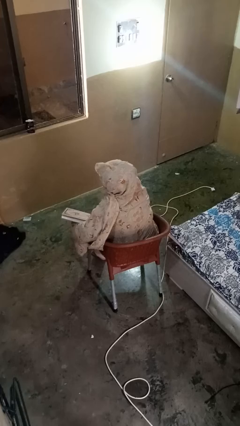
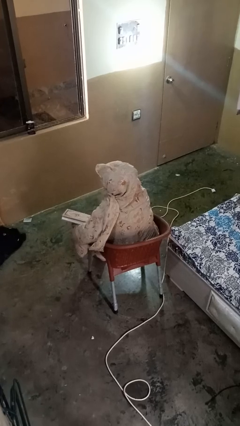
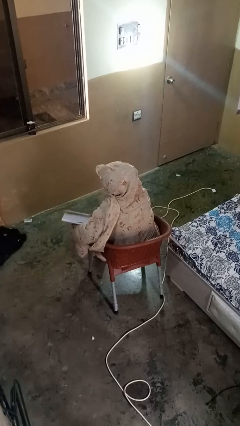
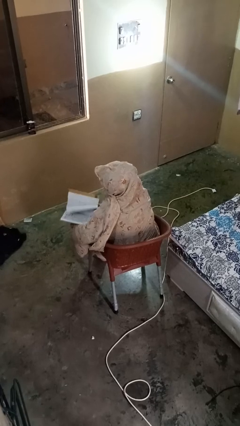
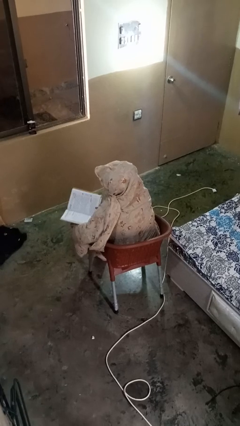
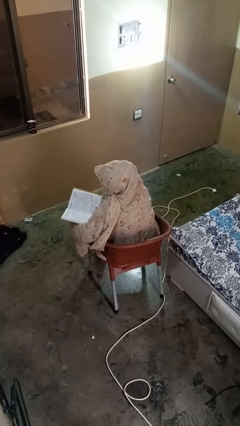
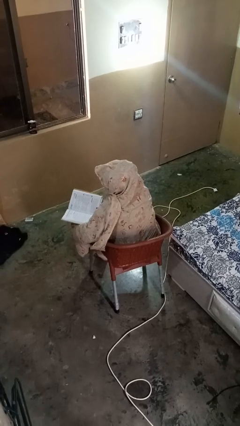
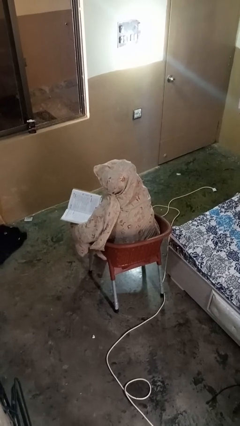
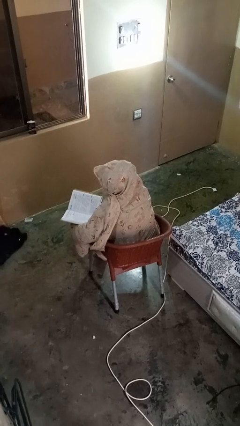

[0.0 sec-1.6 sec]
person reads book

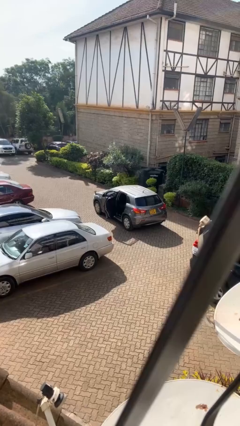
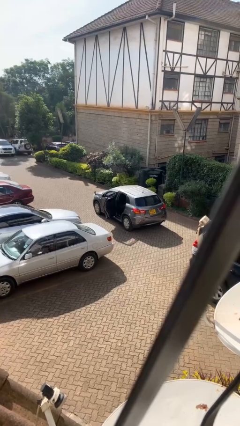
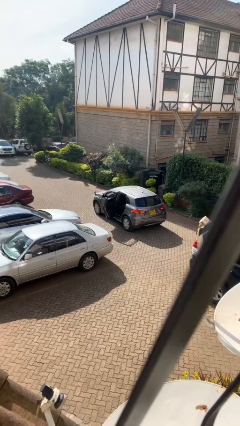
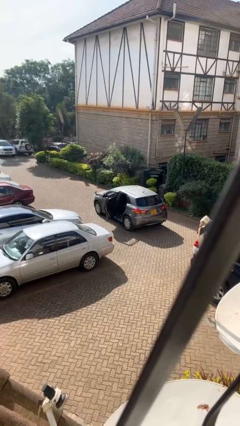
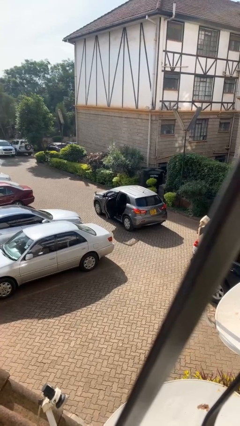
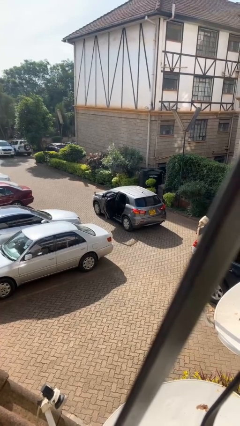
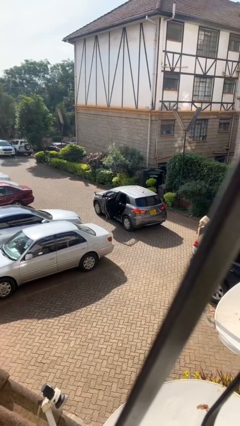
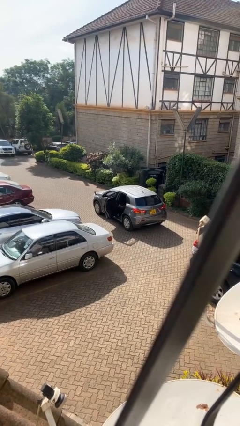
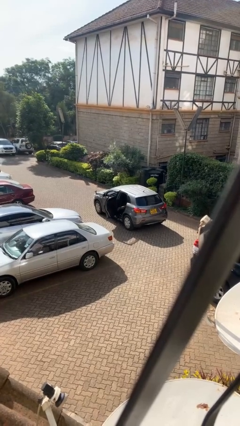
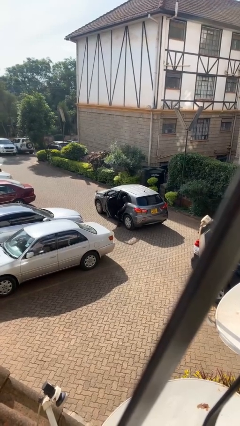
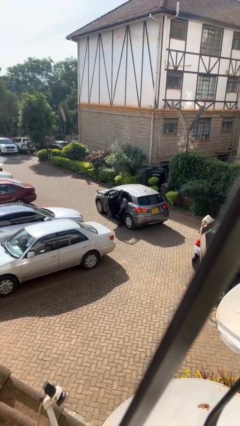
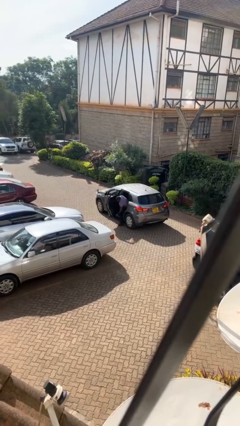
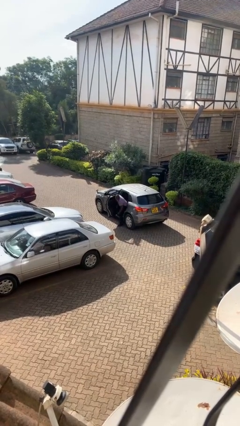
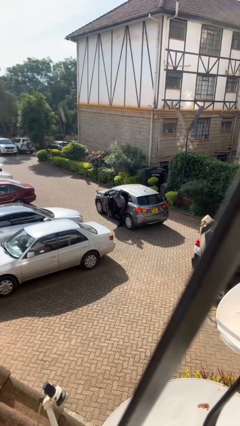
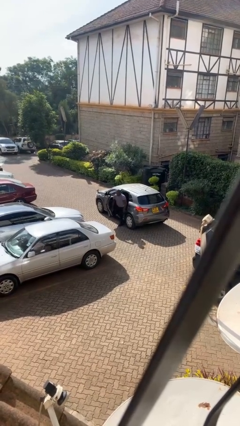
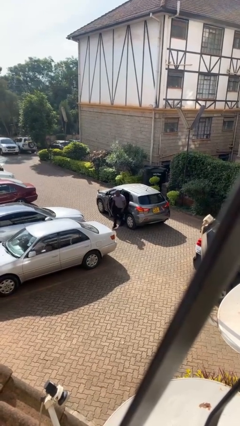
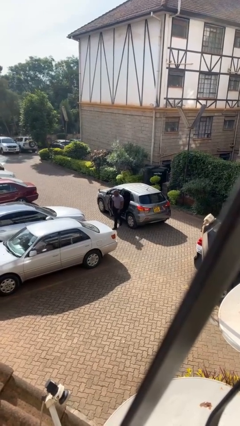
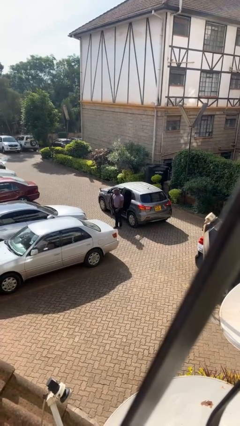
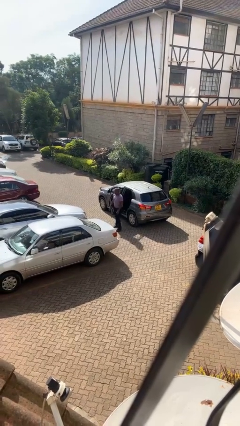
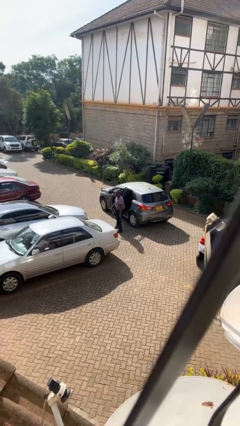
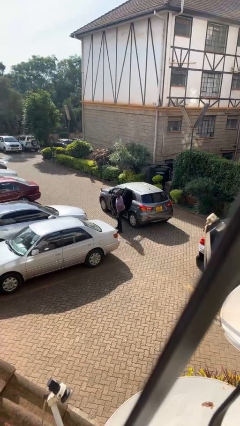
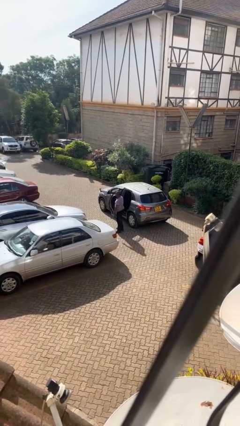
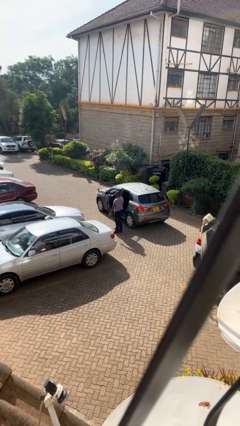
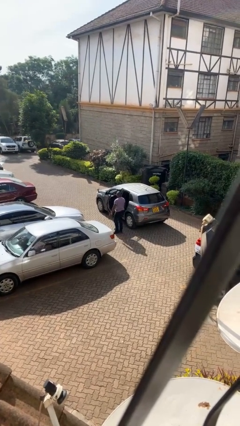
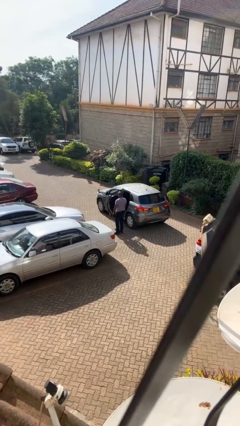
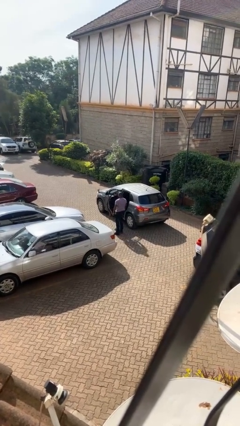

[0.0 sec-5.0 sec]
person exits car

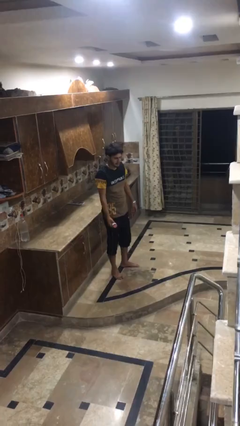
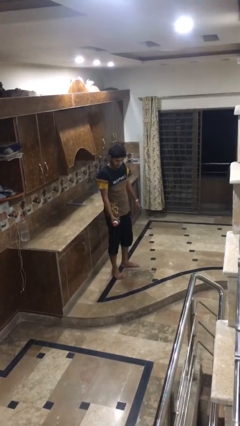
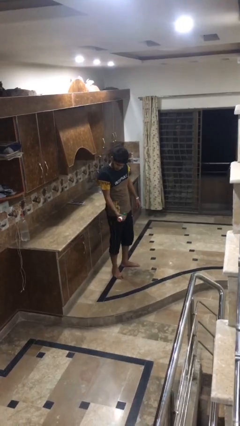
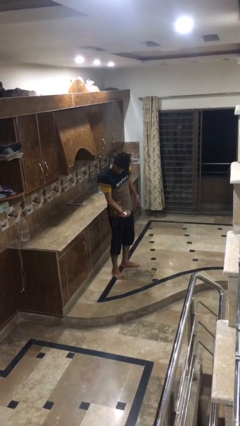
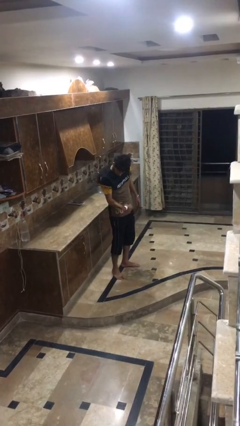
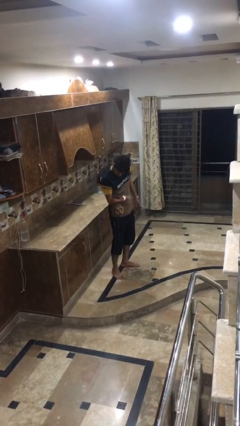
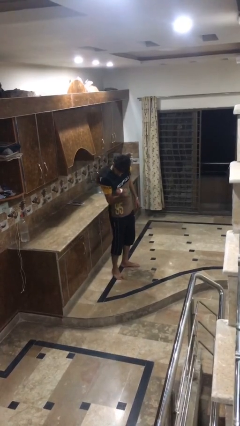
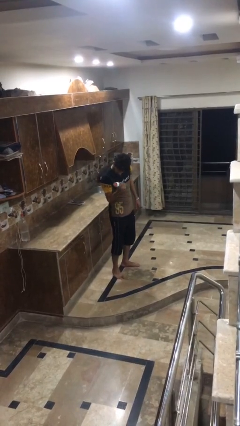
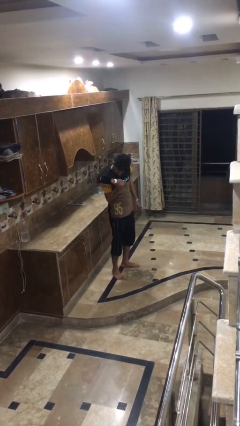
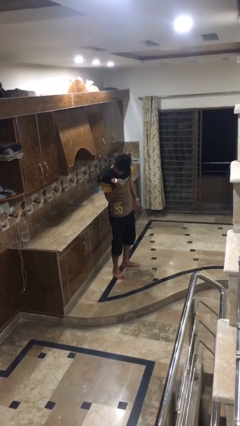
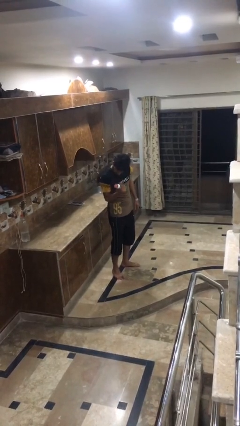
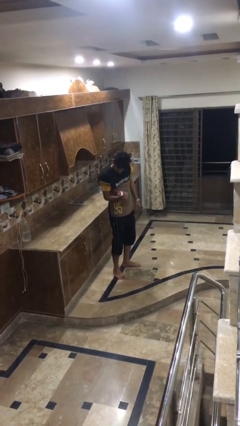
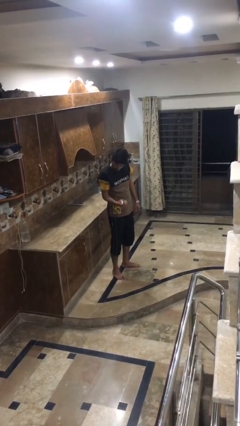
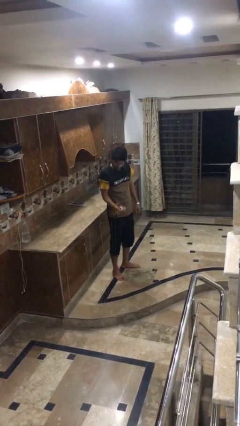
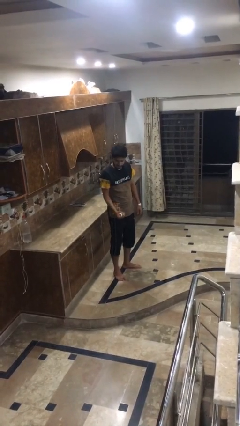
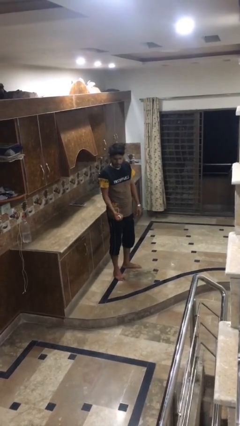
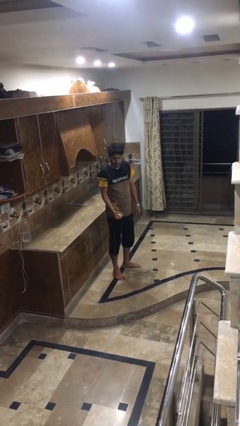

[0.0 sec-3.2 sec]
person lifts dumbbells

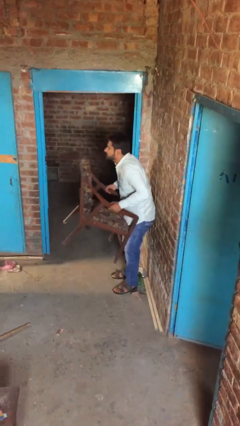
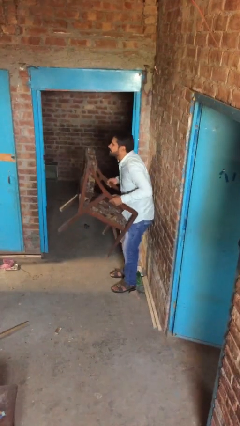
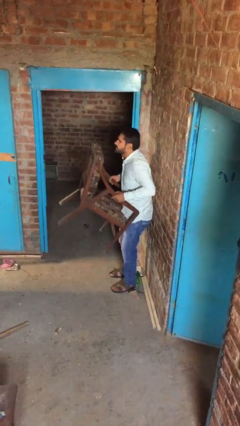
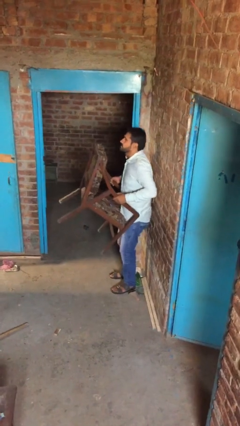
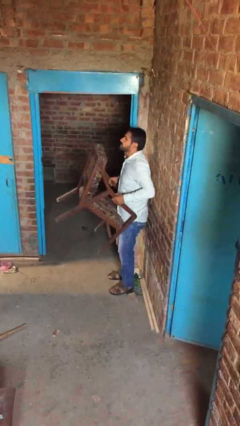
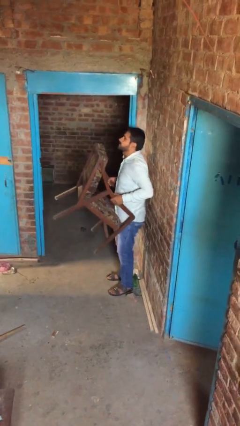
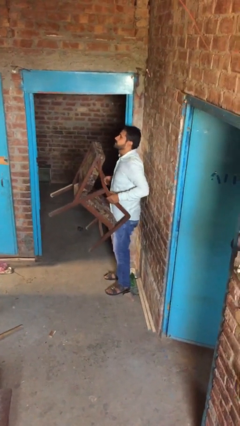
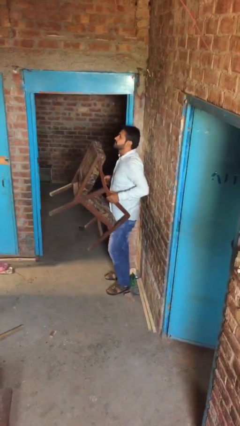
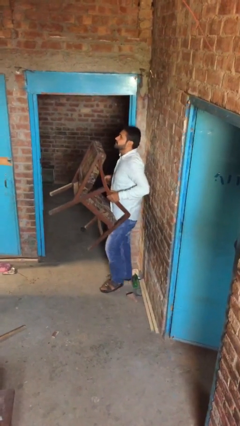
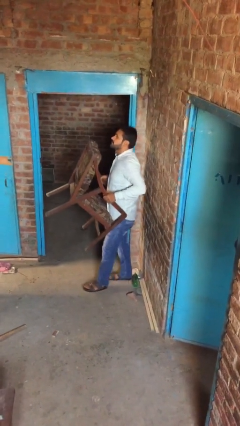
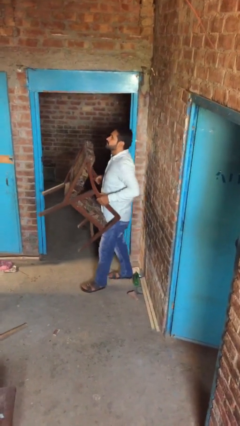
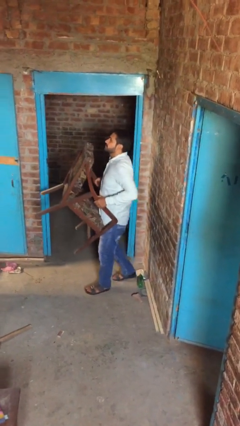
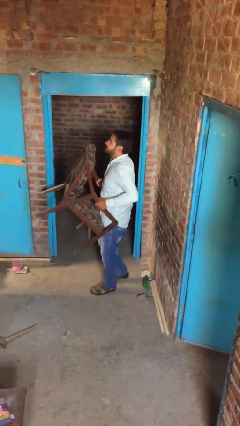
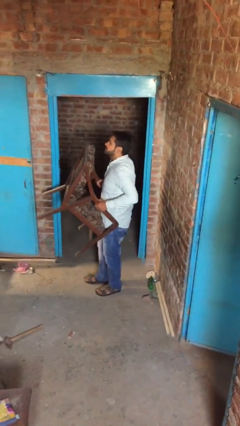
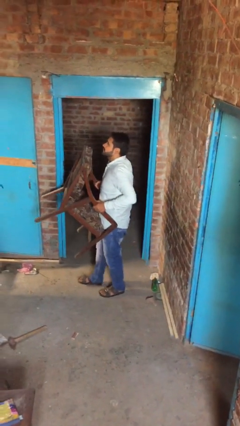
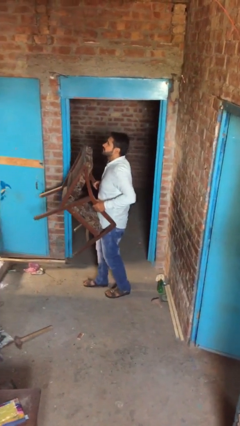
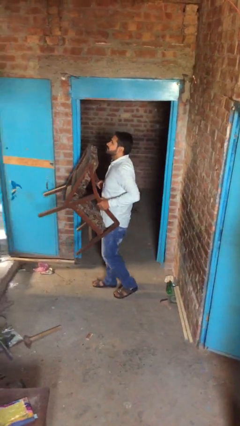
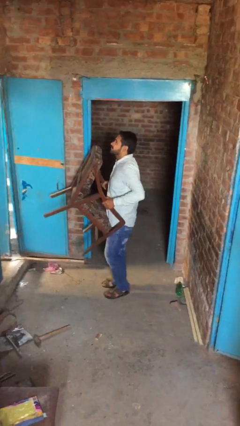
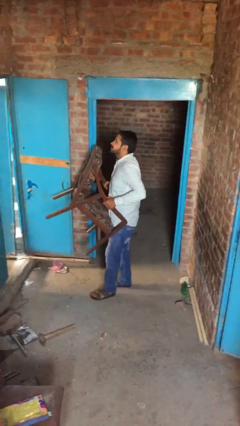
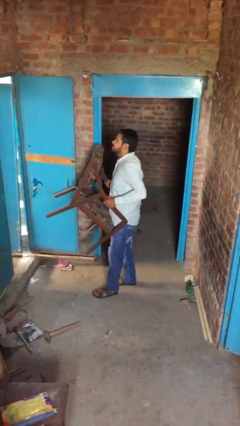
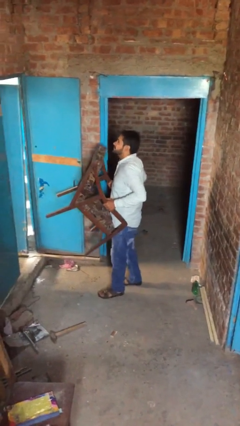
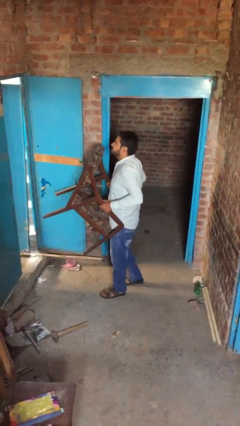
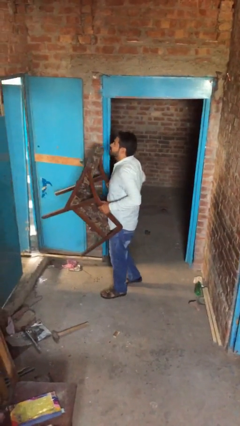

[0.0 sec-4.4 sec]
person carries heavy object

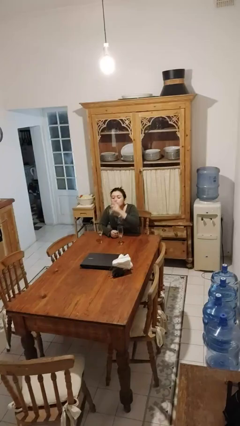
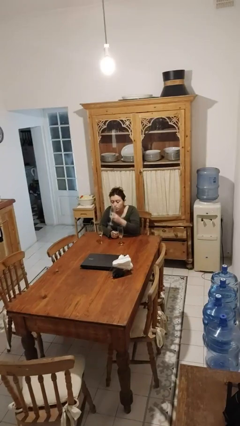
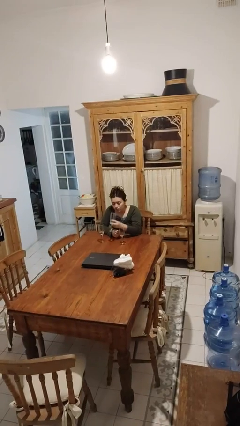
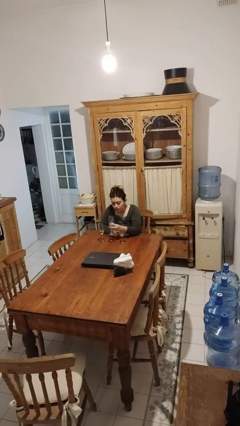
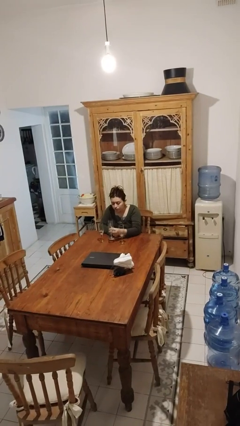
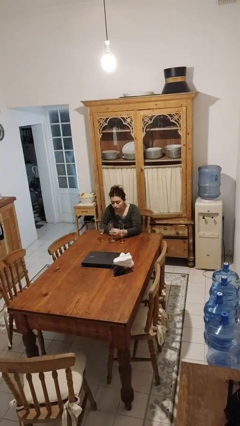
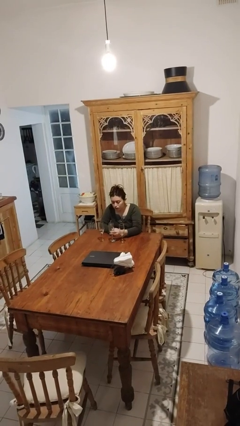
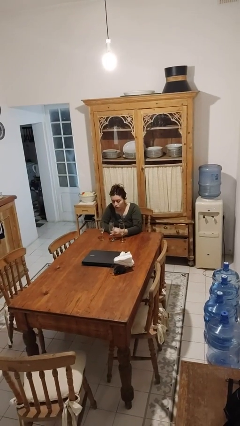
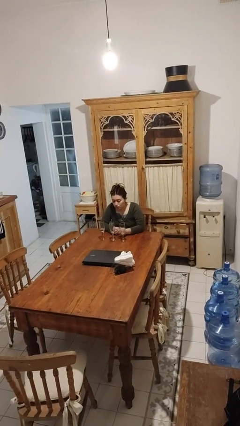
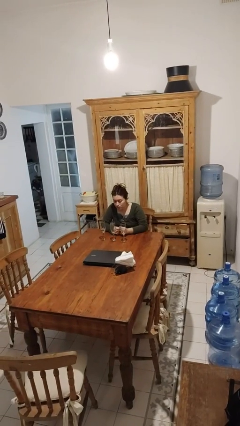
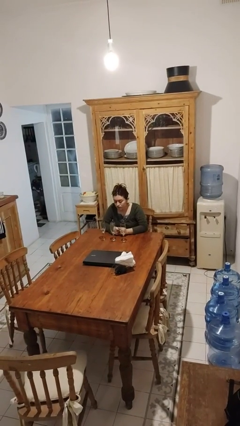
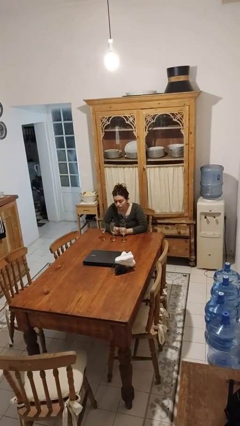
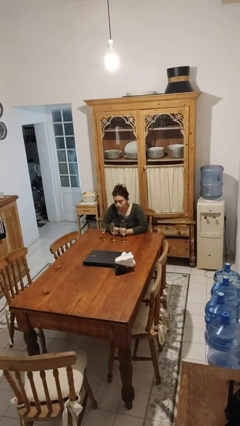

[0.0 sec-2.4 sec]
person puts down object on table

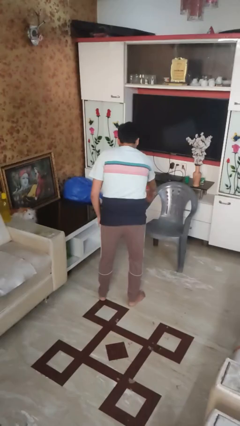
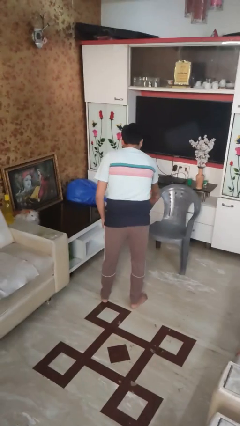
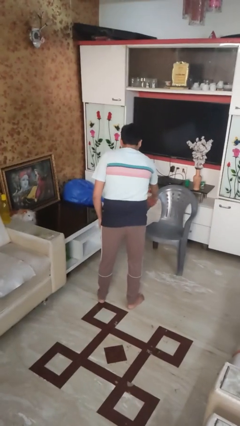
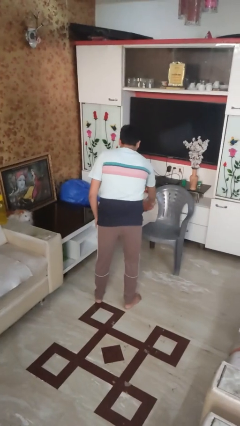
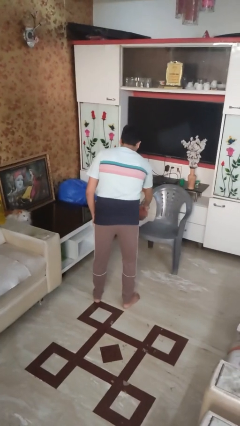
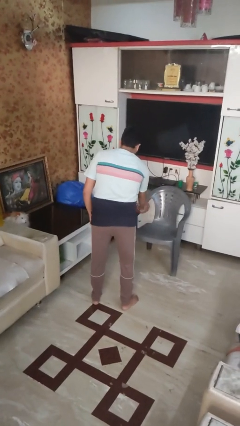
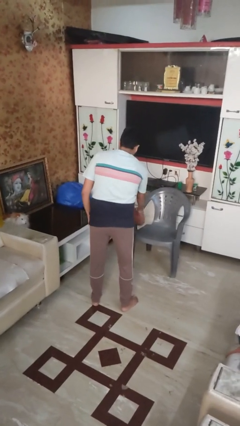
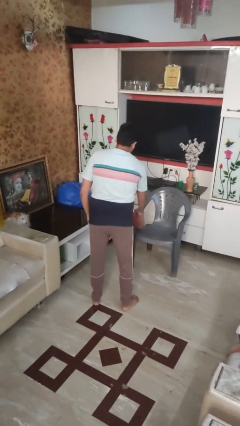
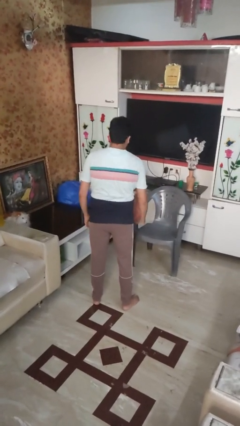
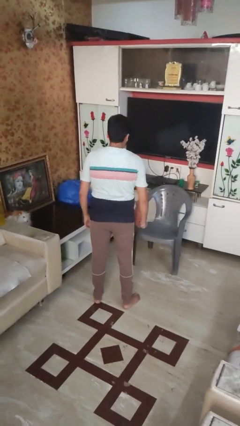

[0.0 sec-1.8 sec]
person dusts furniture
